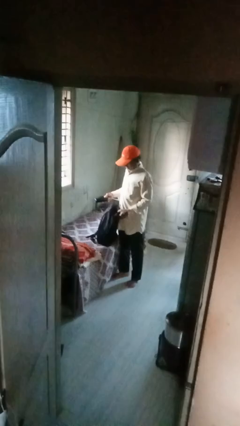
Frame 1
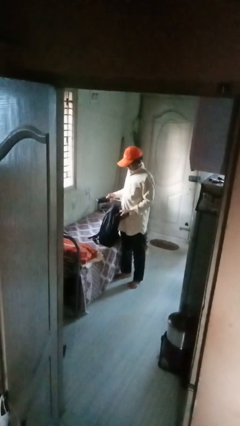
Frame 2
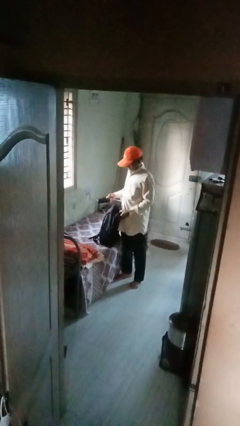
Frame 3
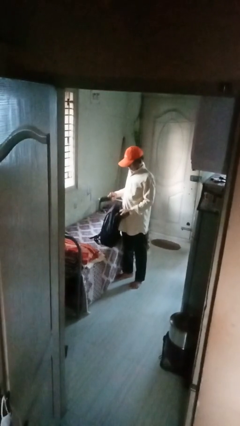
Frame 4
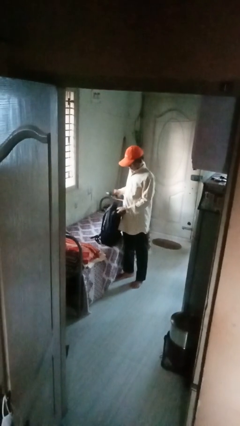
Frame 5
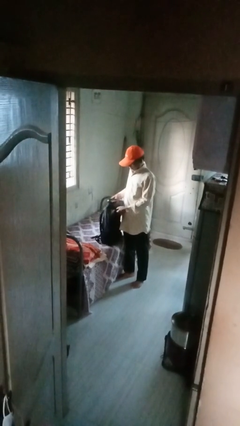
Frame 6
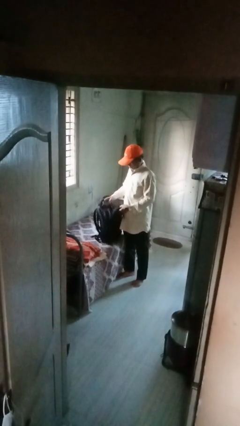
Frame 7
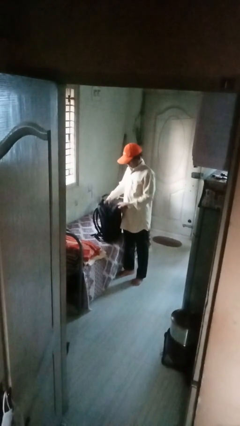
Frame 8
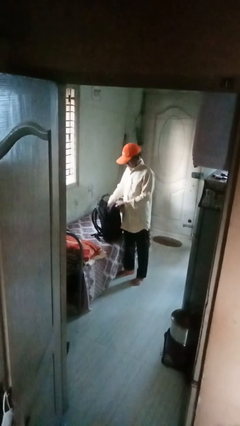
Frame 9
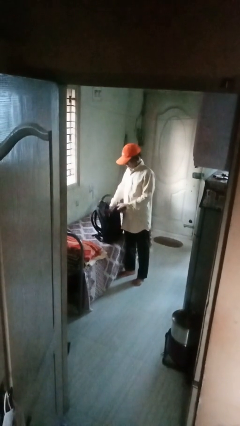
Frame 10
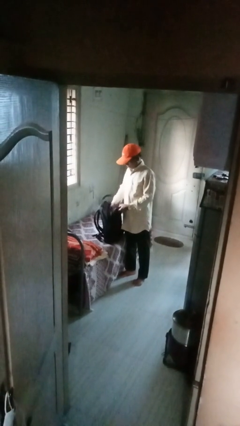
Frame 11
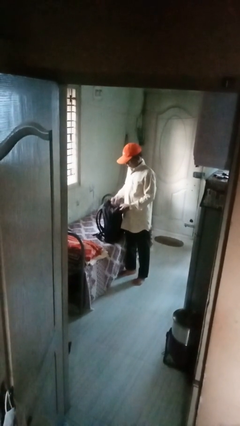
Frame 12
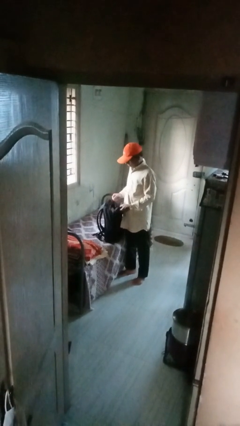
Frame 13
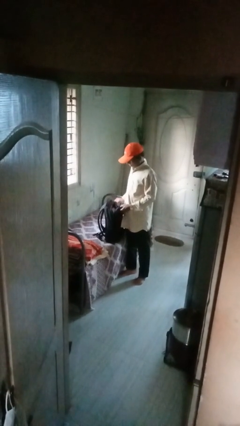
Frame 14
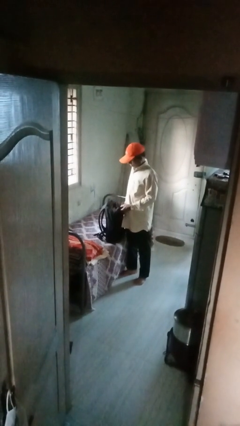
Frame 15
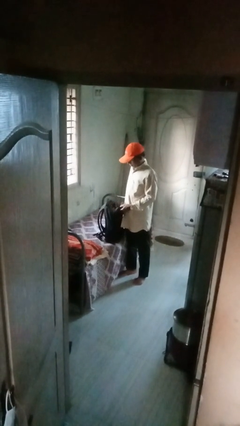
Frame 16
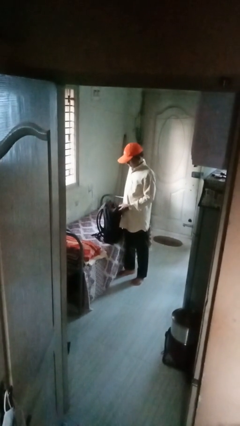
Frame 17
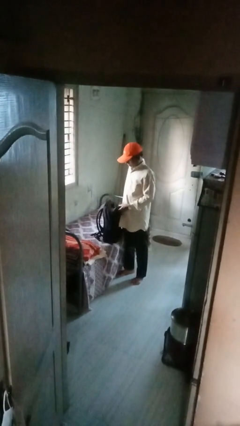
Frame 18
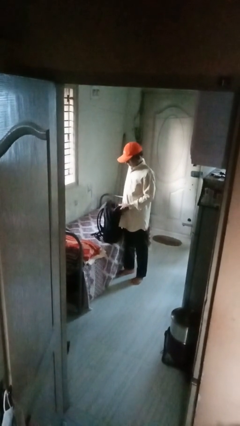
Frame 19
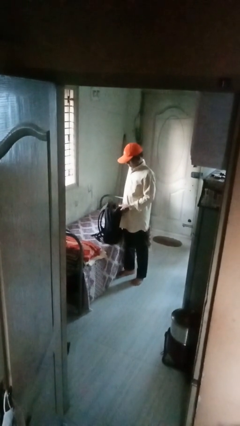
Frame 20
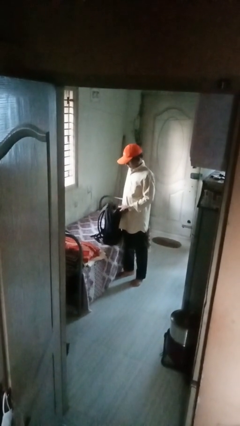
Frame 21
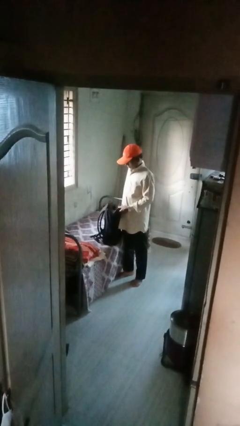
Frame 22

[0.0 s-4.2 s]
person puts object into backpack

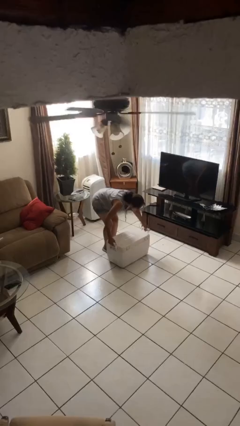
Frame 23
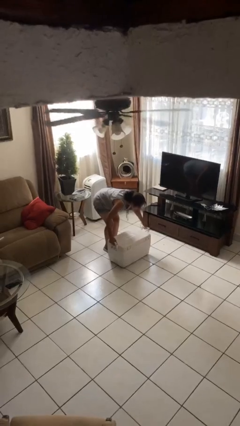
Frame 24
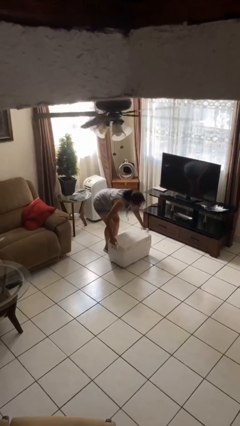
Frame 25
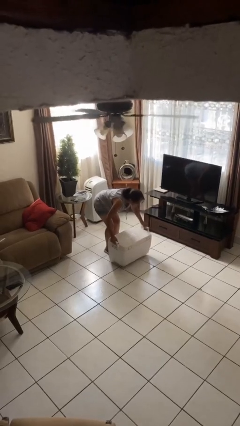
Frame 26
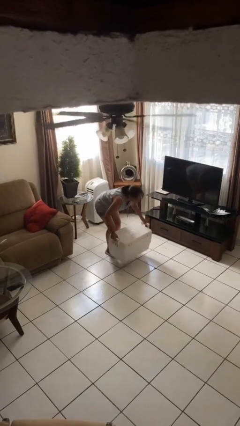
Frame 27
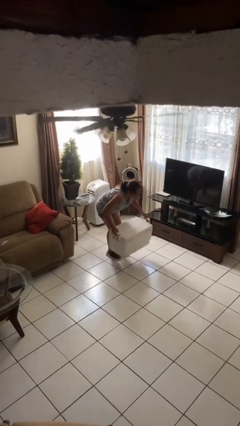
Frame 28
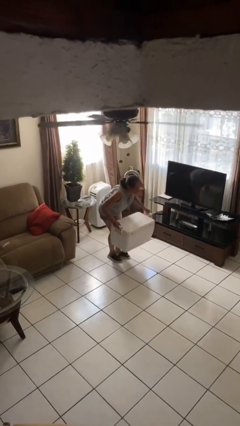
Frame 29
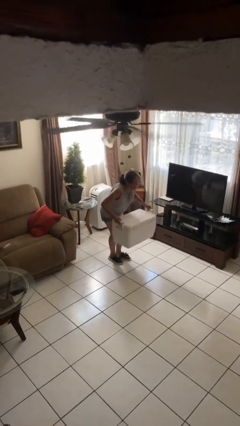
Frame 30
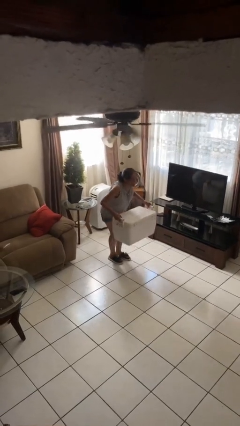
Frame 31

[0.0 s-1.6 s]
person picks up object from floor

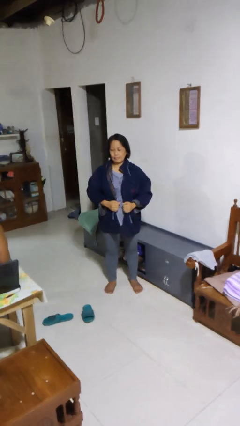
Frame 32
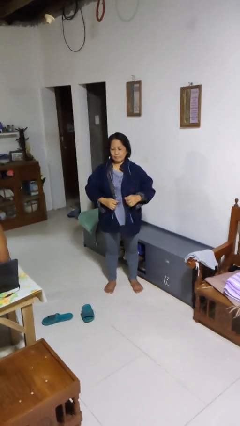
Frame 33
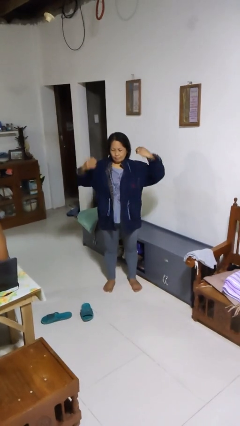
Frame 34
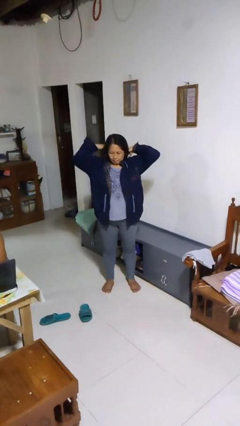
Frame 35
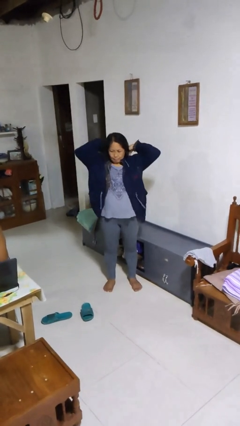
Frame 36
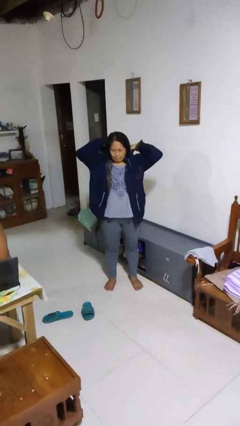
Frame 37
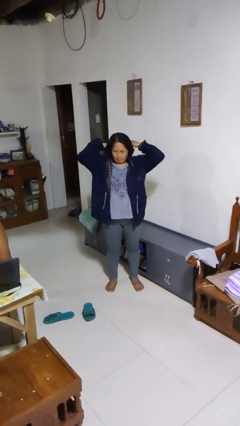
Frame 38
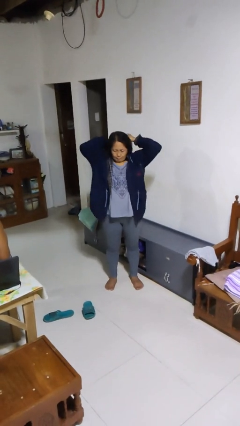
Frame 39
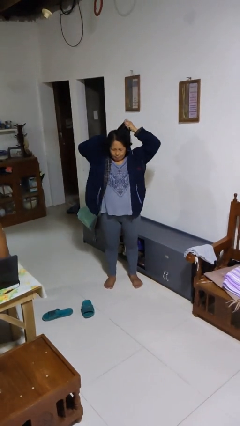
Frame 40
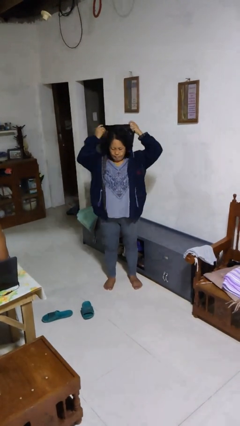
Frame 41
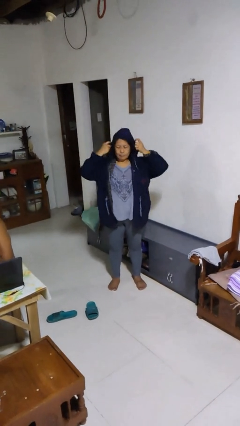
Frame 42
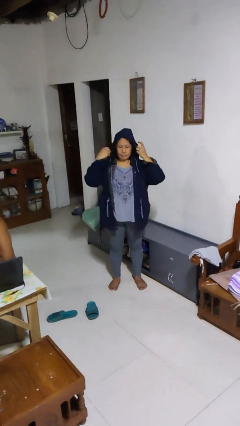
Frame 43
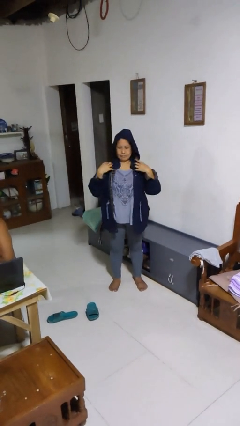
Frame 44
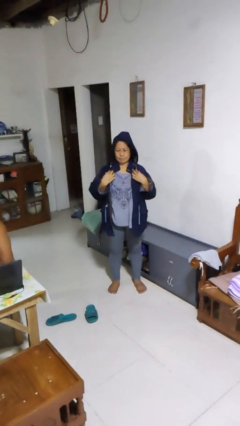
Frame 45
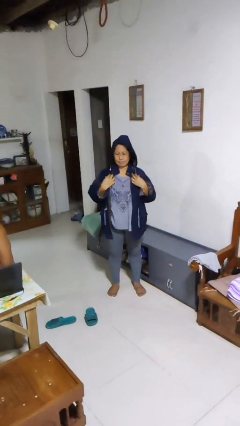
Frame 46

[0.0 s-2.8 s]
person puts on hoodie

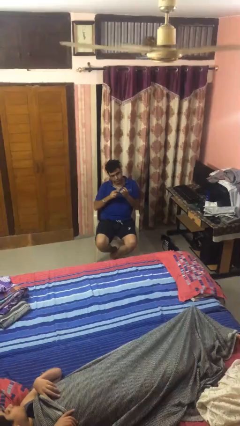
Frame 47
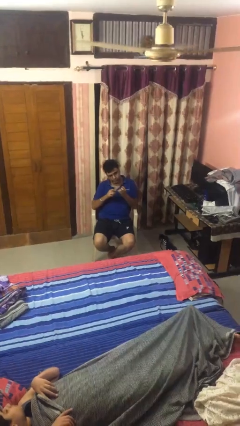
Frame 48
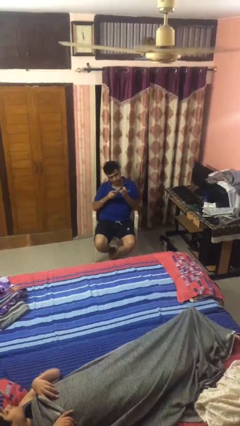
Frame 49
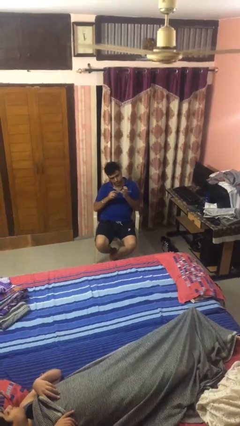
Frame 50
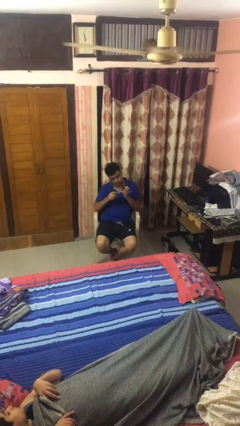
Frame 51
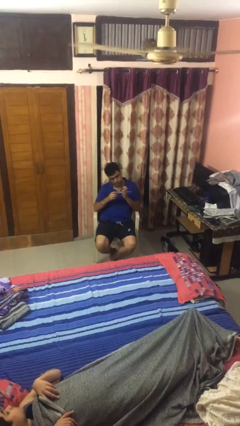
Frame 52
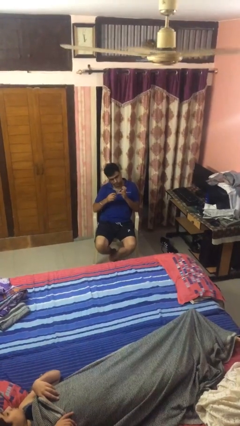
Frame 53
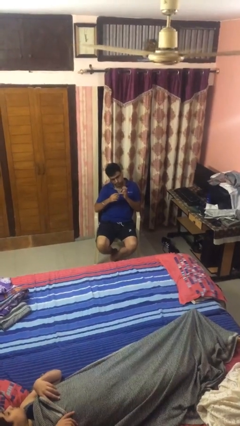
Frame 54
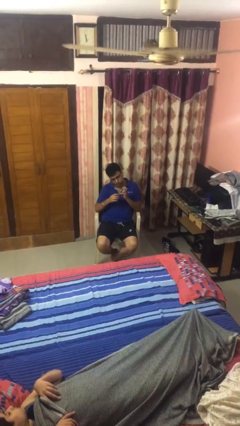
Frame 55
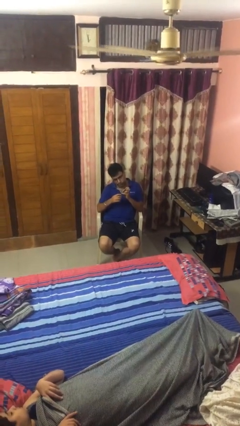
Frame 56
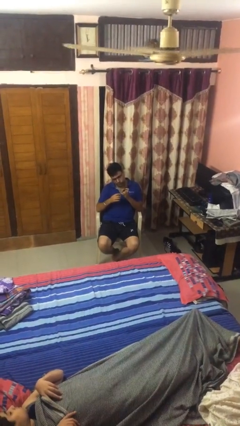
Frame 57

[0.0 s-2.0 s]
person files fingernails

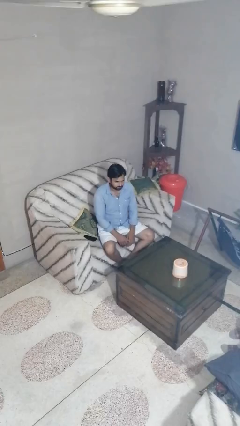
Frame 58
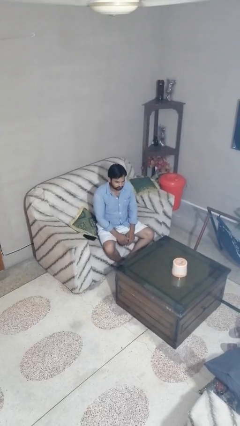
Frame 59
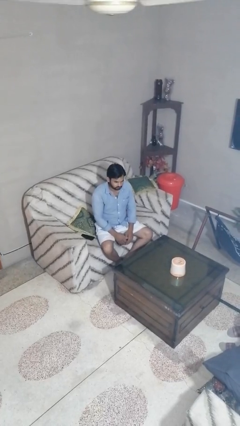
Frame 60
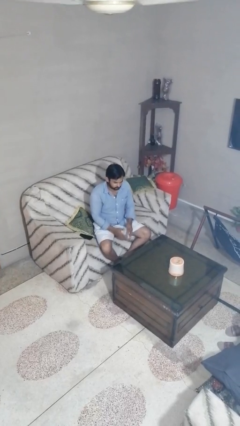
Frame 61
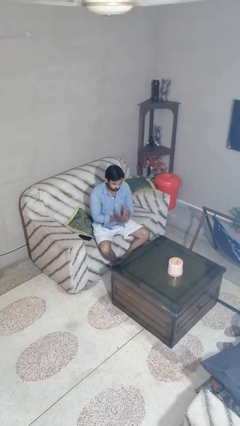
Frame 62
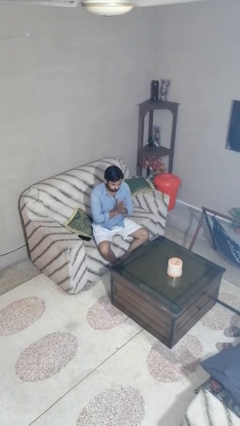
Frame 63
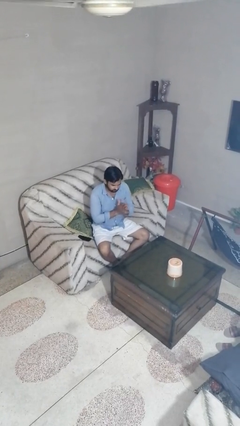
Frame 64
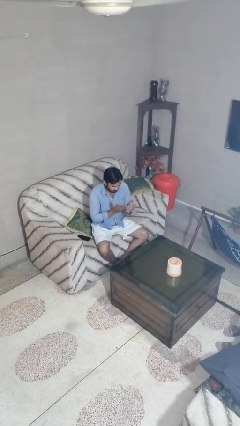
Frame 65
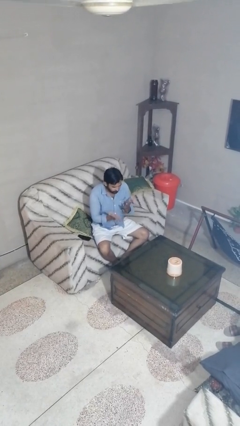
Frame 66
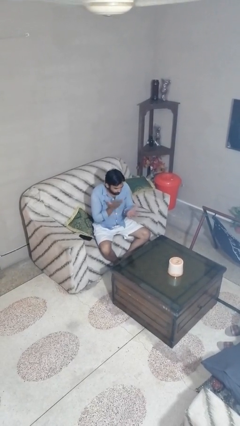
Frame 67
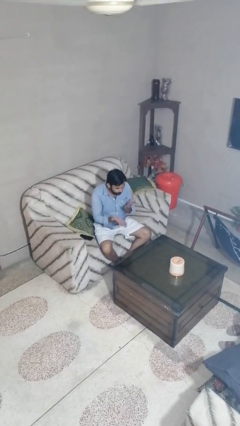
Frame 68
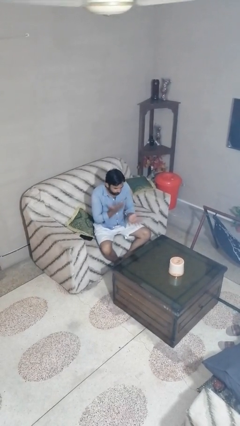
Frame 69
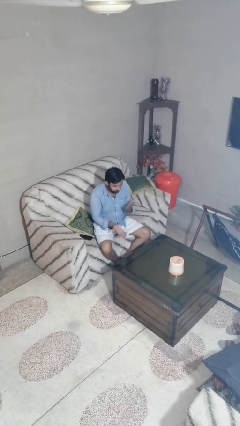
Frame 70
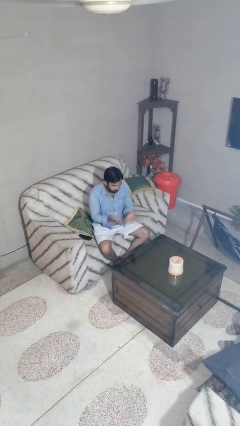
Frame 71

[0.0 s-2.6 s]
person blows into hands

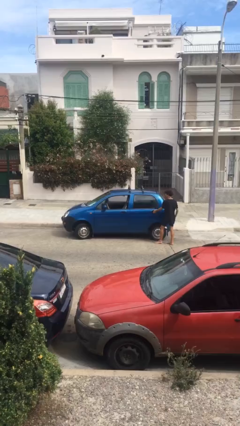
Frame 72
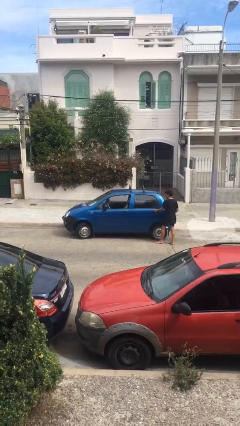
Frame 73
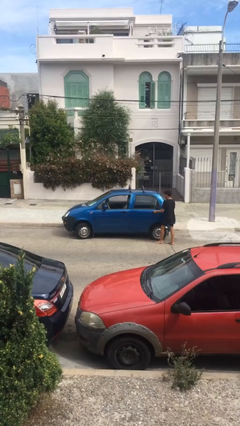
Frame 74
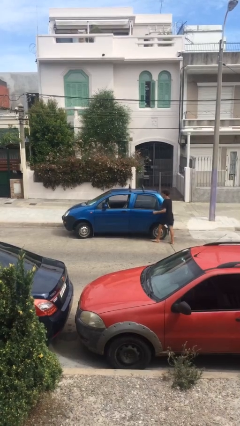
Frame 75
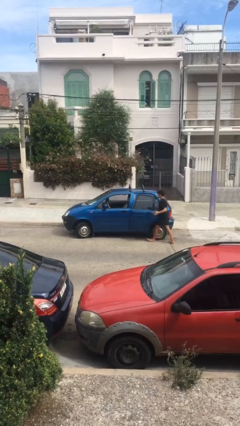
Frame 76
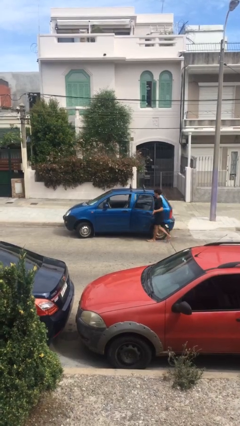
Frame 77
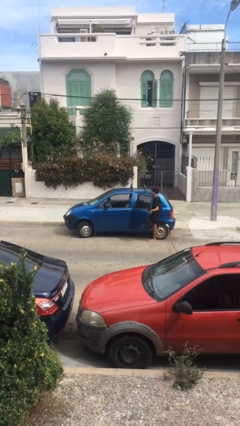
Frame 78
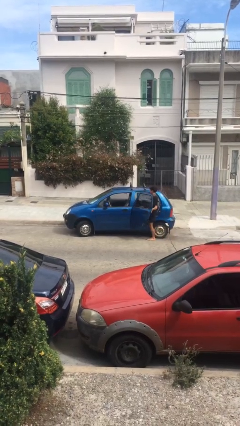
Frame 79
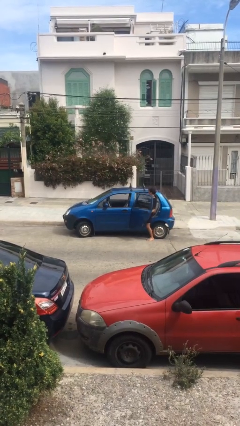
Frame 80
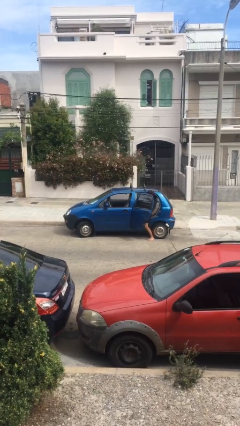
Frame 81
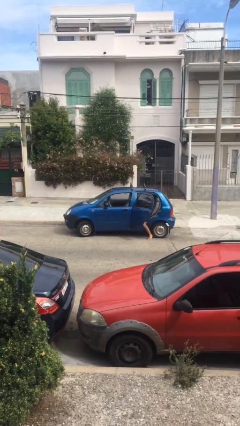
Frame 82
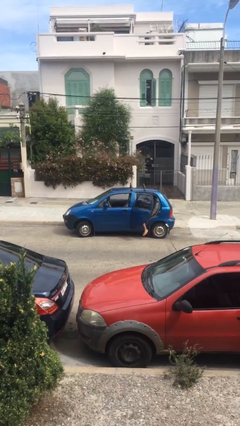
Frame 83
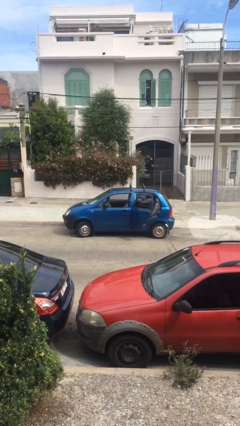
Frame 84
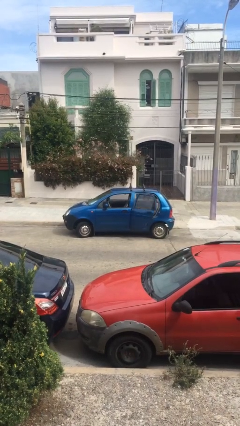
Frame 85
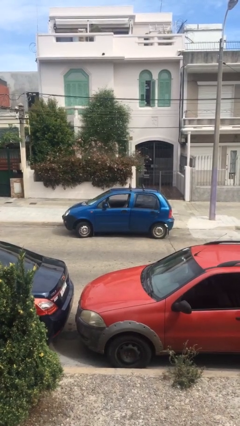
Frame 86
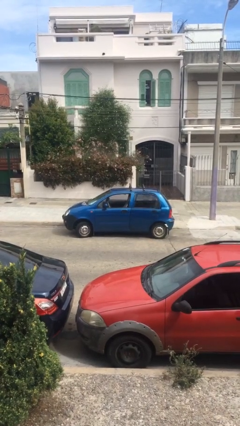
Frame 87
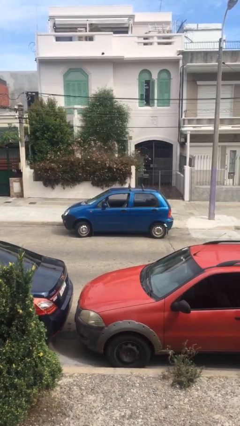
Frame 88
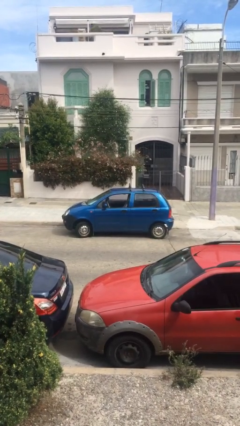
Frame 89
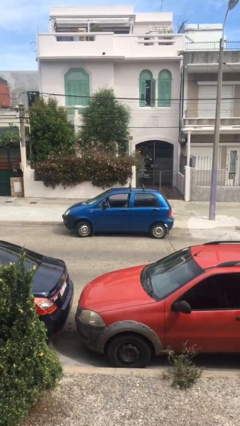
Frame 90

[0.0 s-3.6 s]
car picks up person

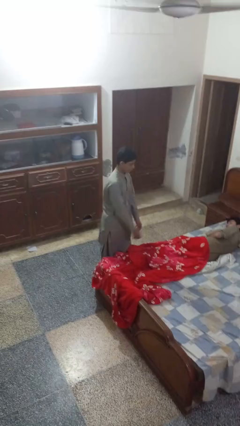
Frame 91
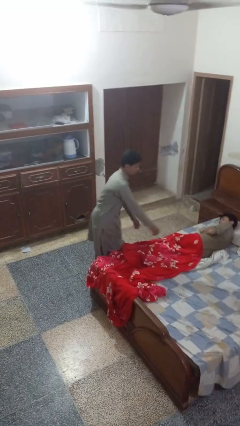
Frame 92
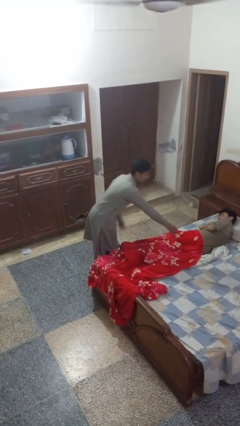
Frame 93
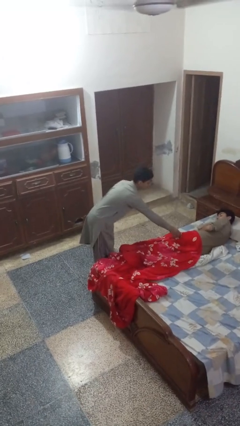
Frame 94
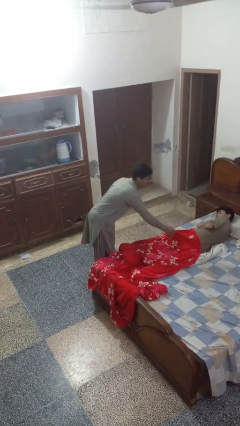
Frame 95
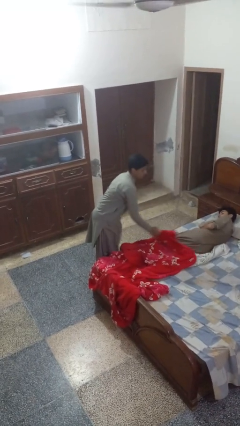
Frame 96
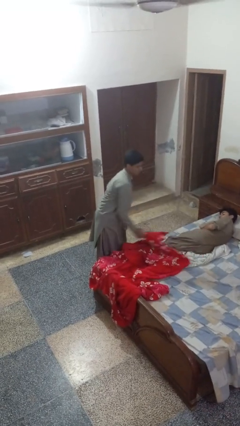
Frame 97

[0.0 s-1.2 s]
person uncovers friend with blanket
